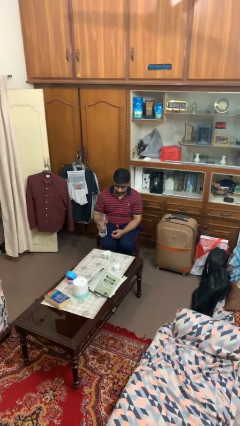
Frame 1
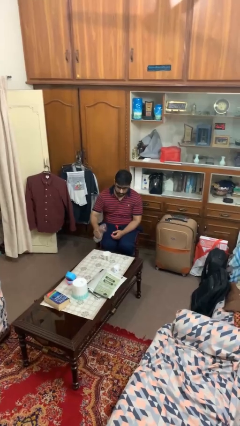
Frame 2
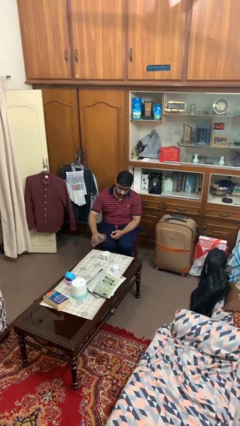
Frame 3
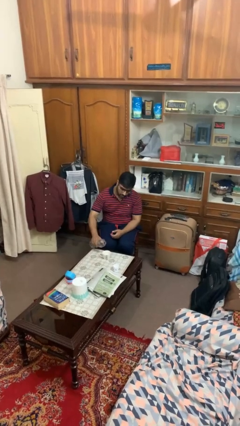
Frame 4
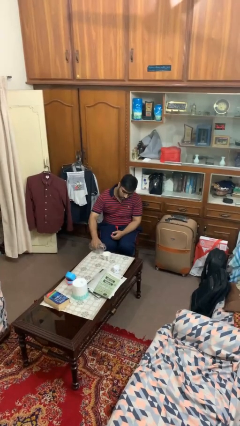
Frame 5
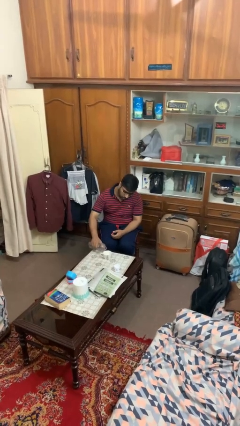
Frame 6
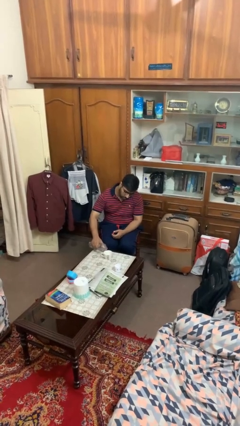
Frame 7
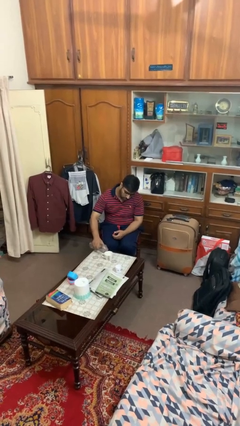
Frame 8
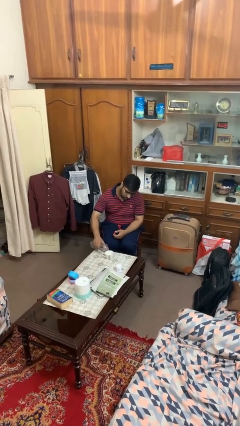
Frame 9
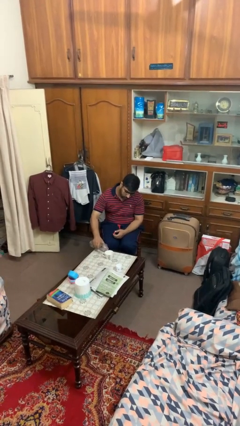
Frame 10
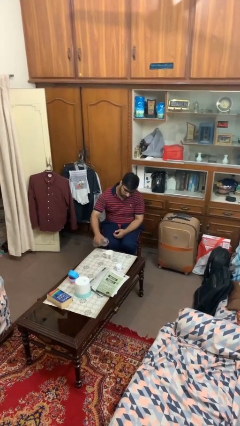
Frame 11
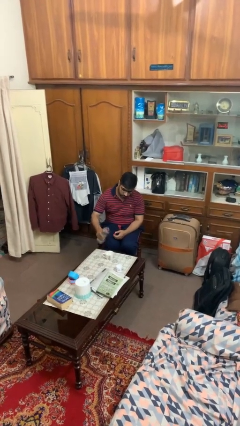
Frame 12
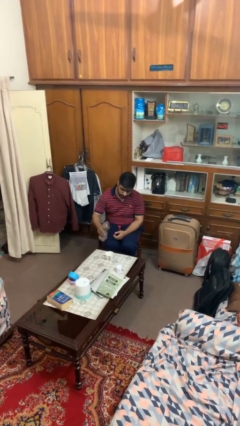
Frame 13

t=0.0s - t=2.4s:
person pours liquid into cup

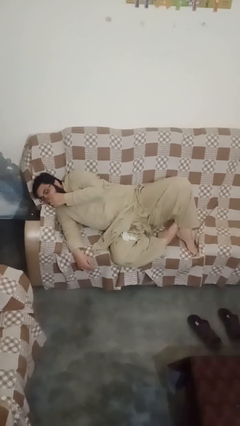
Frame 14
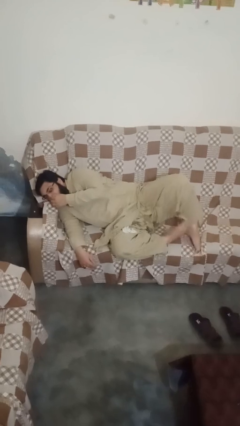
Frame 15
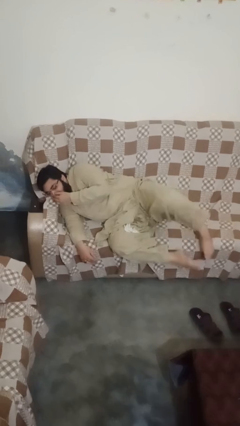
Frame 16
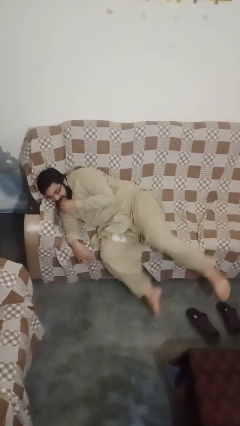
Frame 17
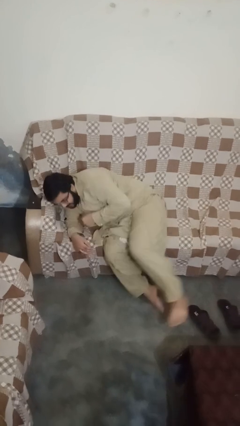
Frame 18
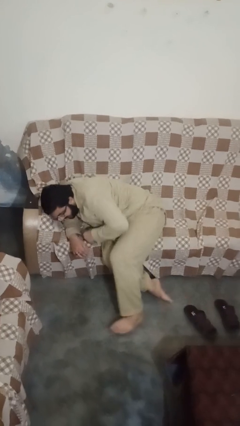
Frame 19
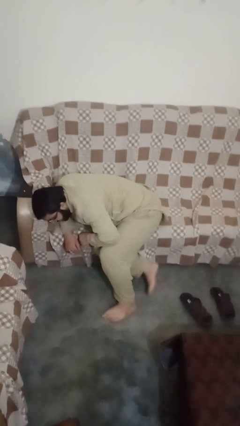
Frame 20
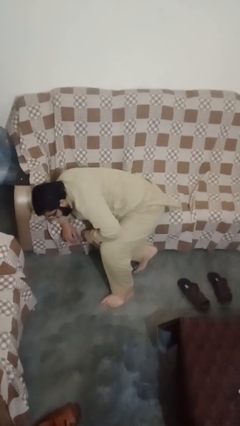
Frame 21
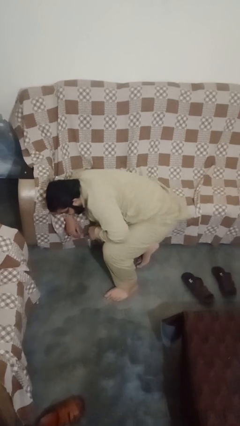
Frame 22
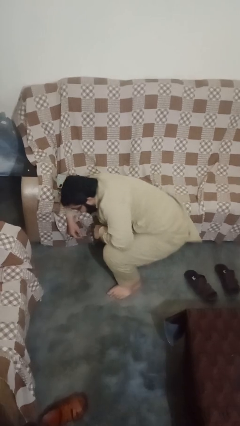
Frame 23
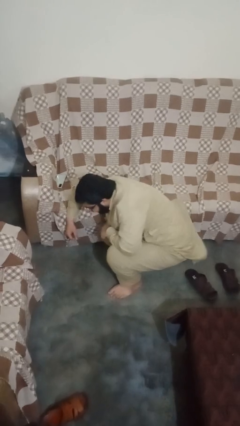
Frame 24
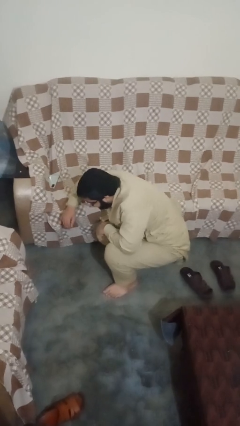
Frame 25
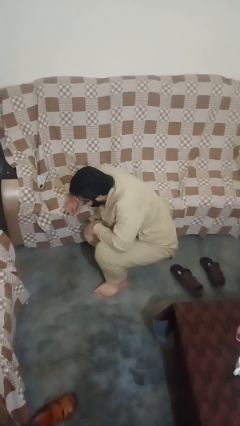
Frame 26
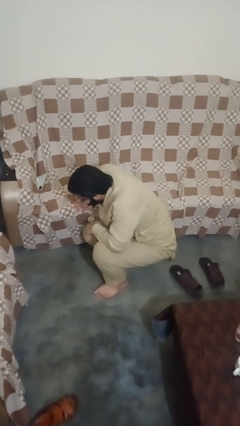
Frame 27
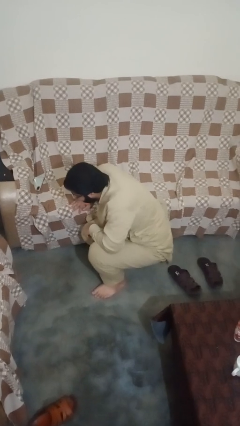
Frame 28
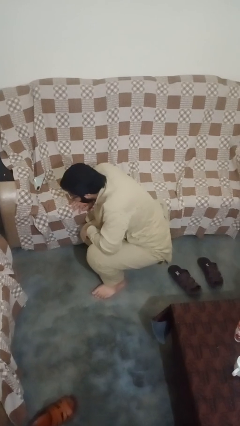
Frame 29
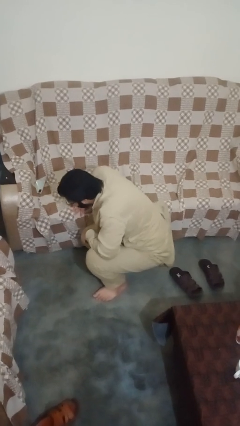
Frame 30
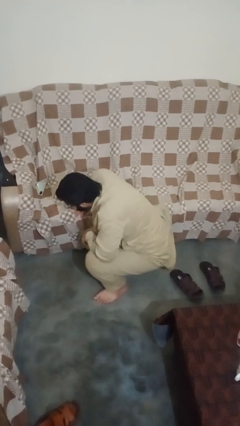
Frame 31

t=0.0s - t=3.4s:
person falls from bed

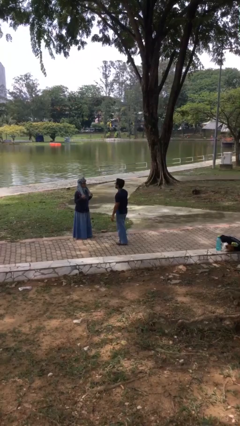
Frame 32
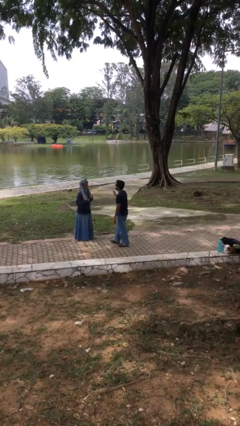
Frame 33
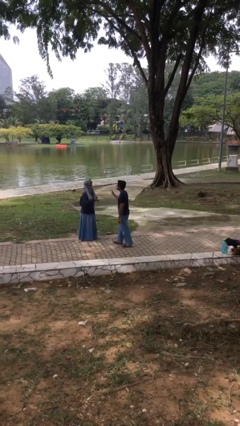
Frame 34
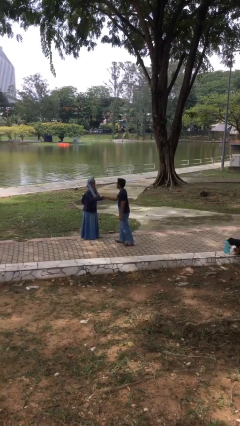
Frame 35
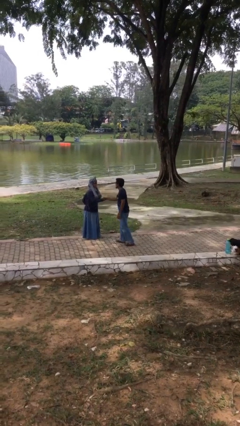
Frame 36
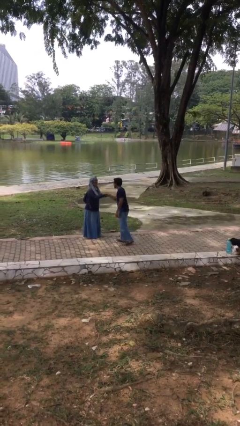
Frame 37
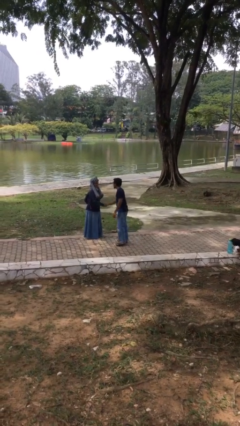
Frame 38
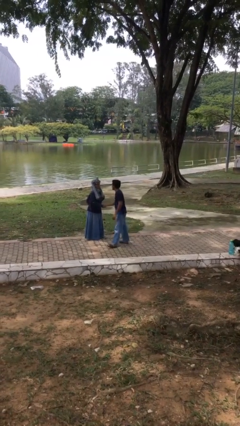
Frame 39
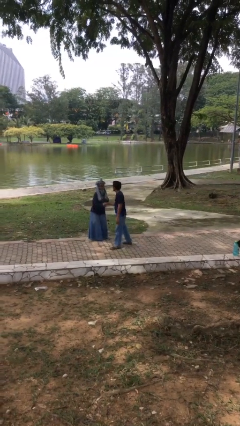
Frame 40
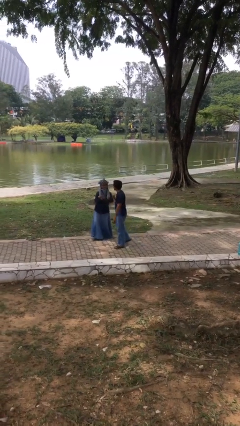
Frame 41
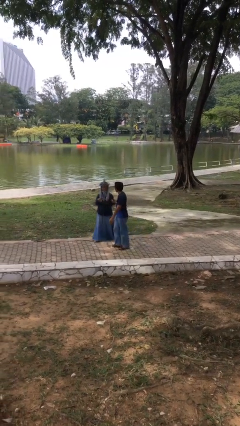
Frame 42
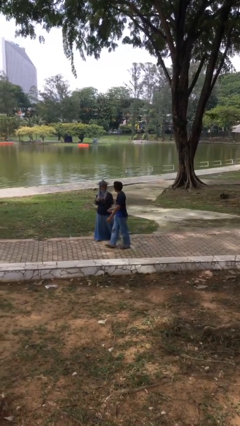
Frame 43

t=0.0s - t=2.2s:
person shakes hand

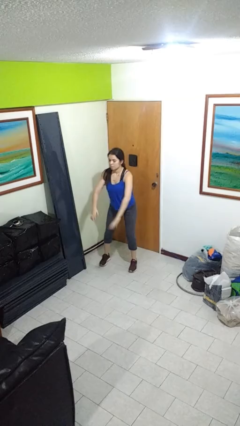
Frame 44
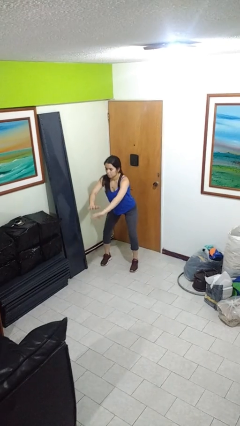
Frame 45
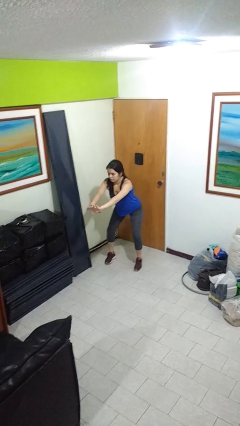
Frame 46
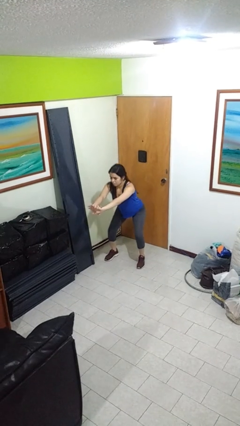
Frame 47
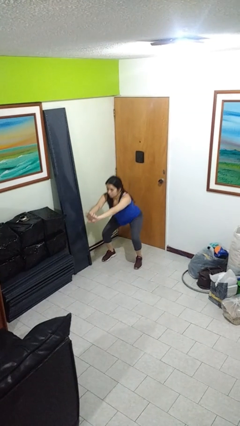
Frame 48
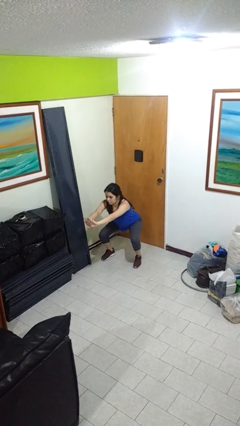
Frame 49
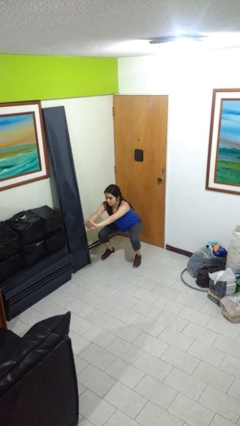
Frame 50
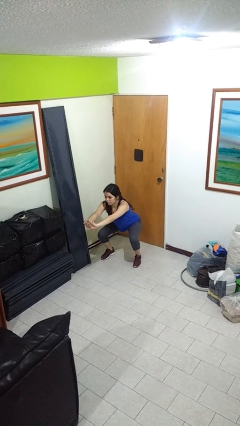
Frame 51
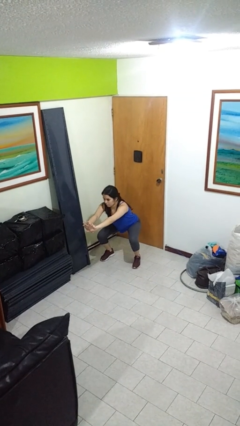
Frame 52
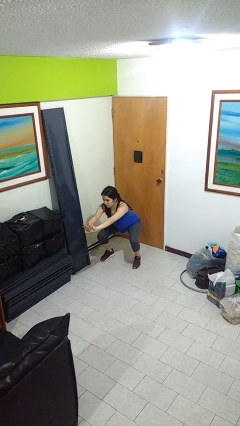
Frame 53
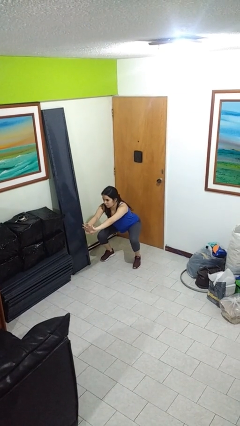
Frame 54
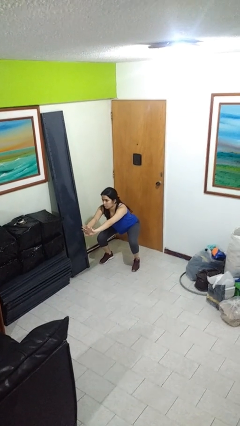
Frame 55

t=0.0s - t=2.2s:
person squats

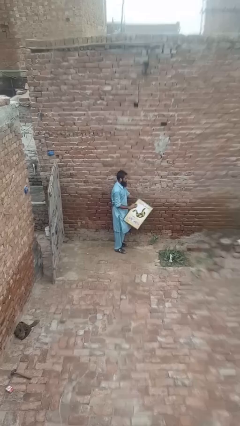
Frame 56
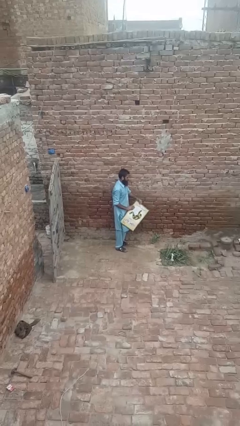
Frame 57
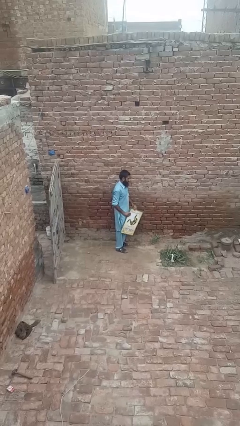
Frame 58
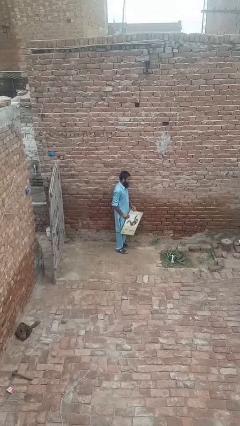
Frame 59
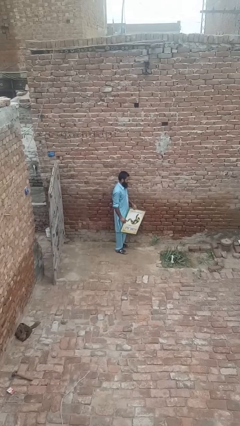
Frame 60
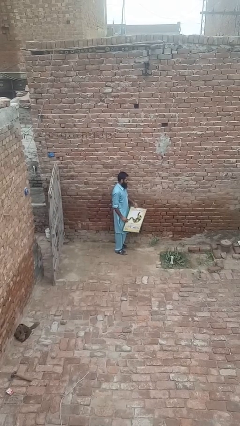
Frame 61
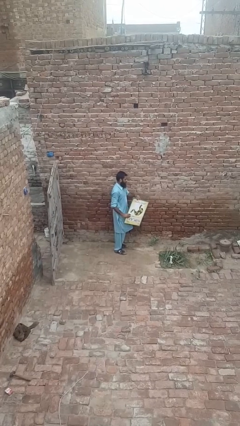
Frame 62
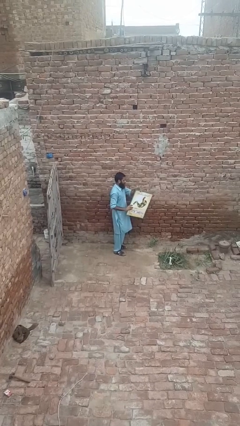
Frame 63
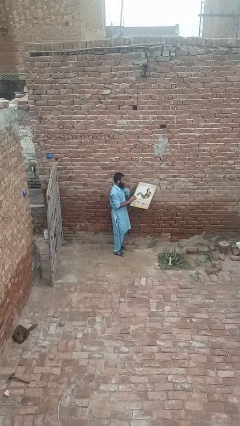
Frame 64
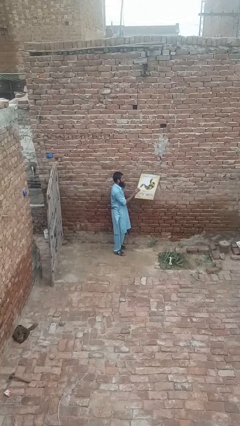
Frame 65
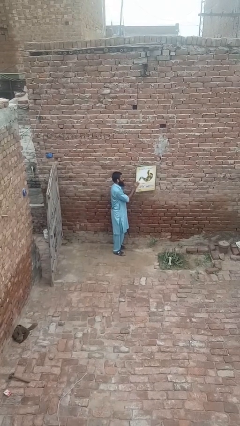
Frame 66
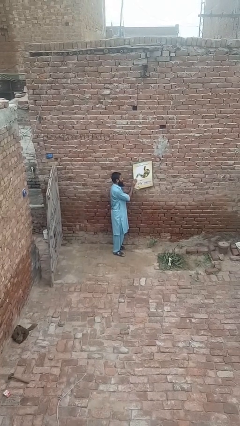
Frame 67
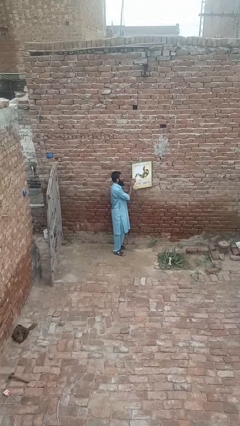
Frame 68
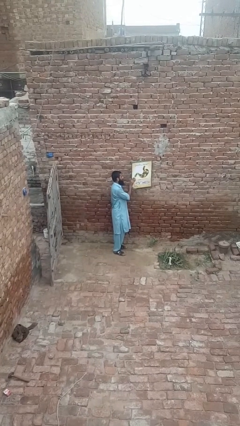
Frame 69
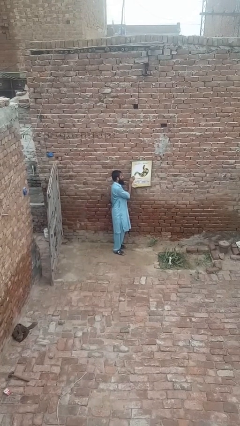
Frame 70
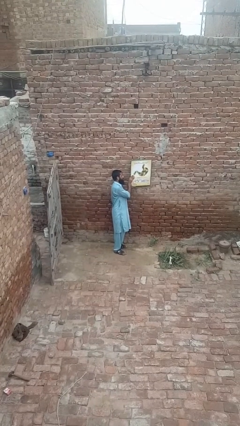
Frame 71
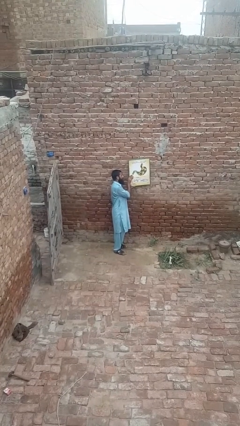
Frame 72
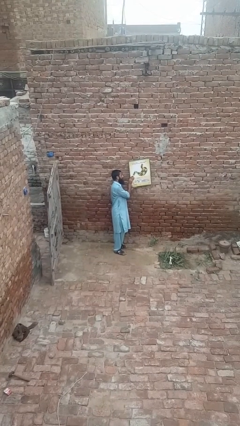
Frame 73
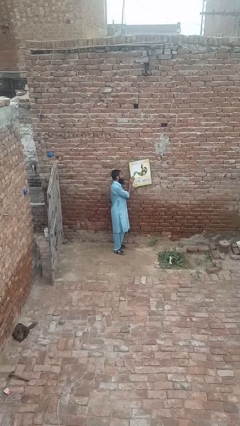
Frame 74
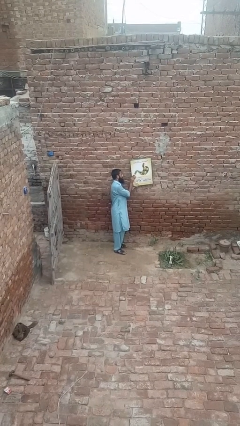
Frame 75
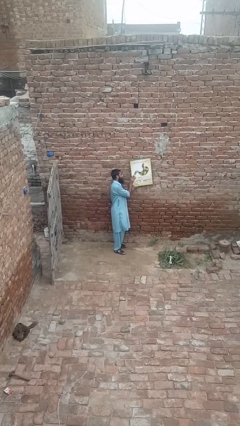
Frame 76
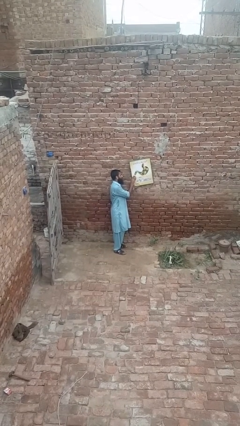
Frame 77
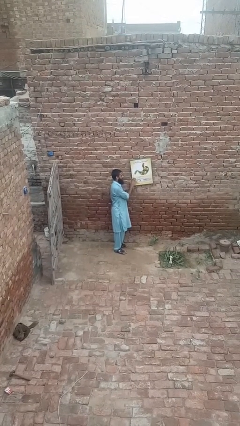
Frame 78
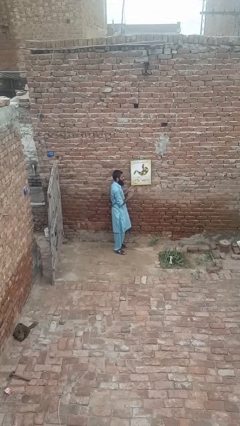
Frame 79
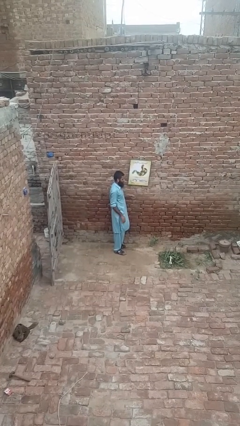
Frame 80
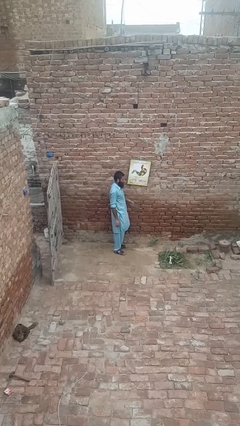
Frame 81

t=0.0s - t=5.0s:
person puts up picture frame

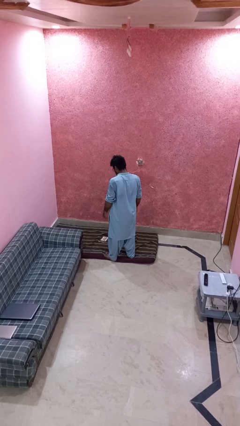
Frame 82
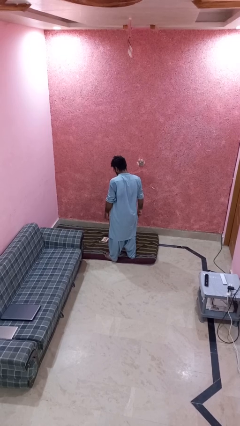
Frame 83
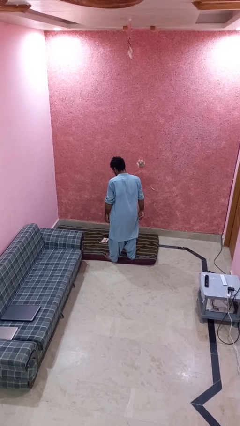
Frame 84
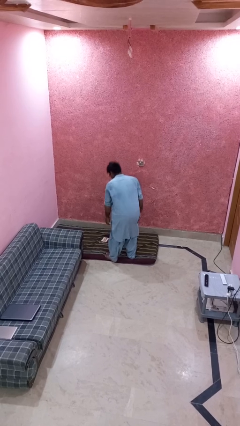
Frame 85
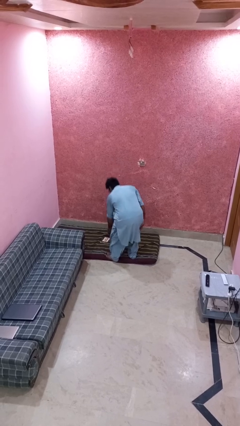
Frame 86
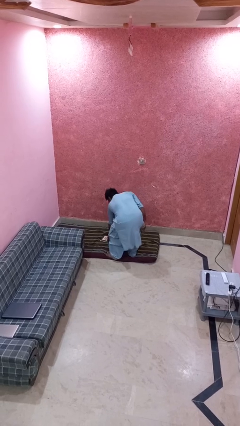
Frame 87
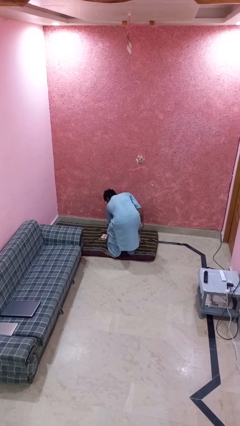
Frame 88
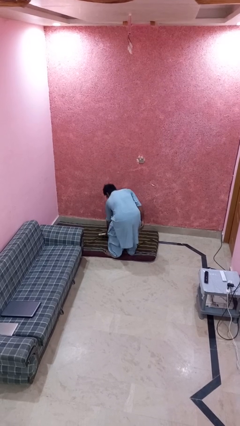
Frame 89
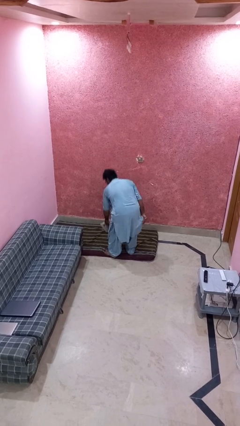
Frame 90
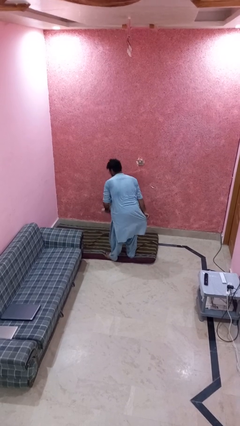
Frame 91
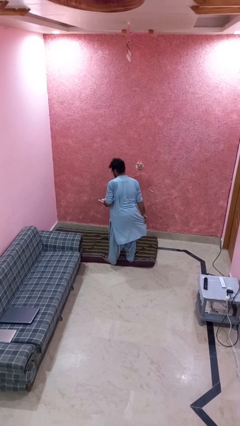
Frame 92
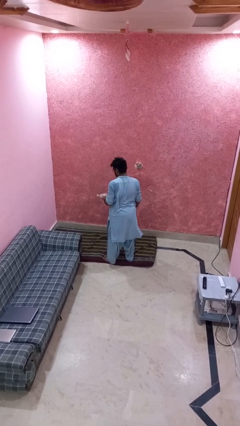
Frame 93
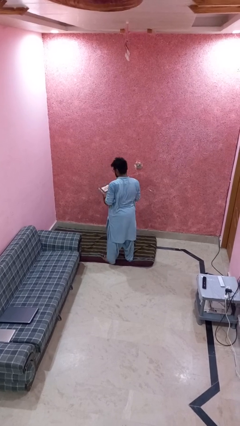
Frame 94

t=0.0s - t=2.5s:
person picks up object from floor
